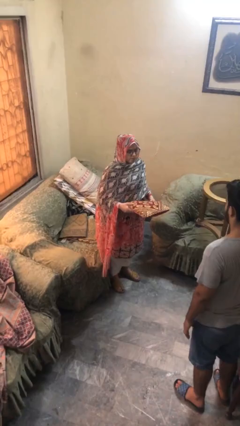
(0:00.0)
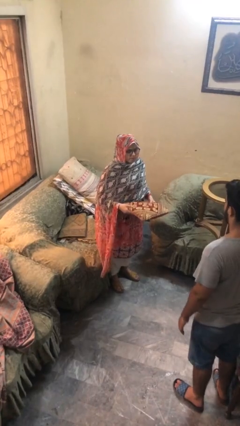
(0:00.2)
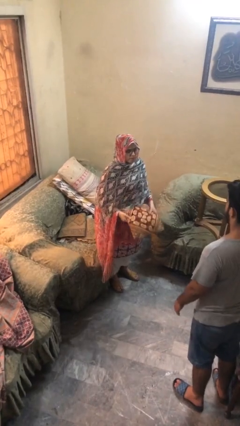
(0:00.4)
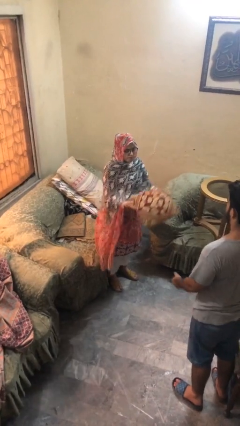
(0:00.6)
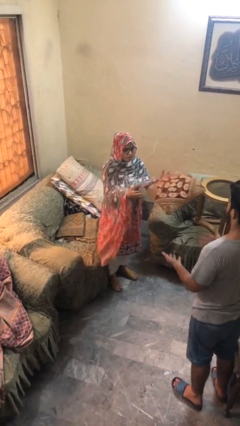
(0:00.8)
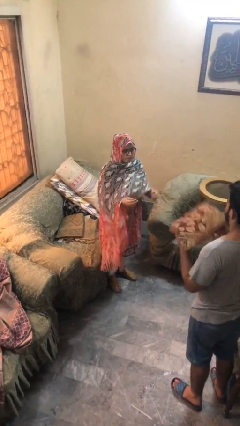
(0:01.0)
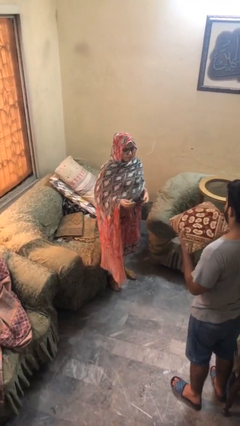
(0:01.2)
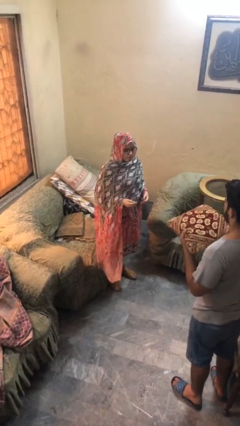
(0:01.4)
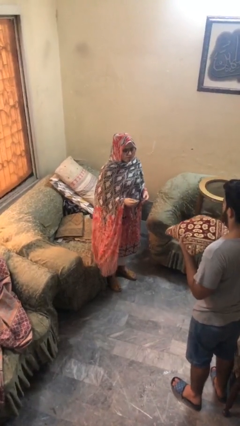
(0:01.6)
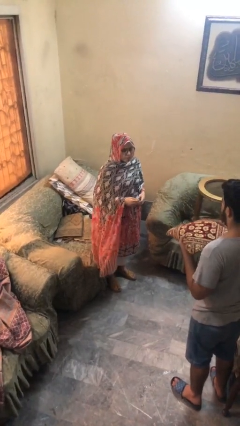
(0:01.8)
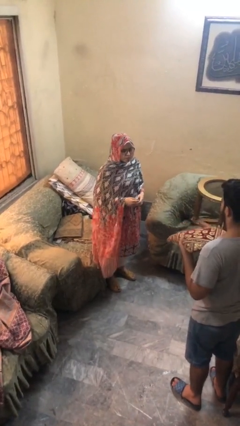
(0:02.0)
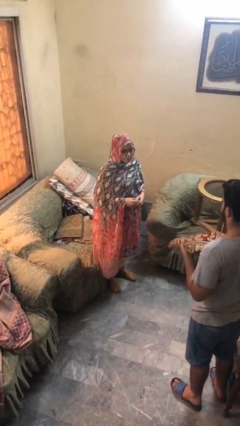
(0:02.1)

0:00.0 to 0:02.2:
person throws object to person

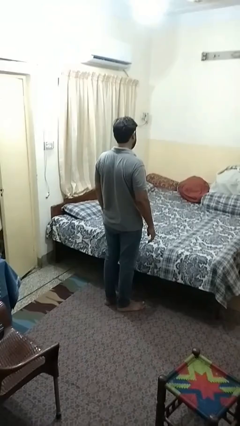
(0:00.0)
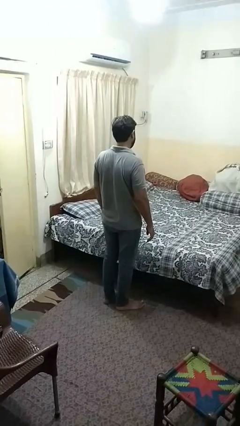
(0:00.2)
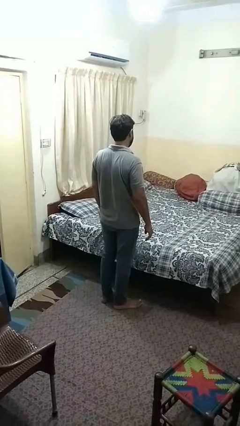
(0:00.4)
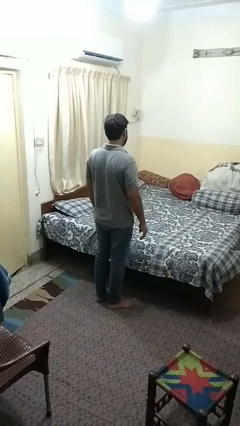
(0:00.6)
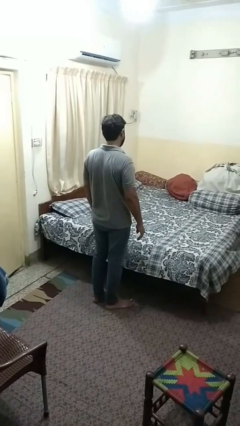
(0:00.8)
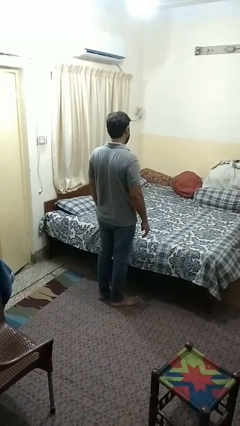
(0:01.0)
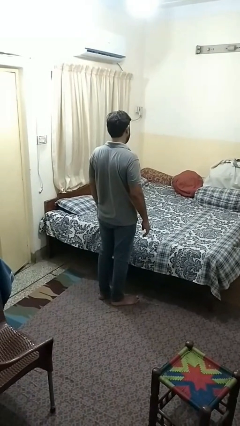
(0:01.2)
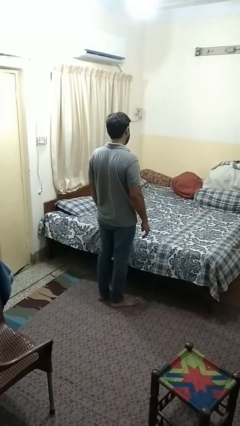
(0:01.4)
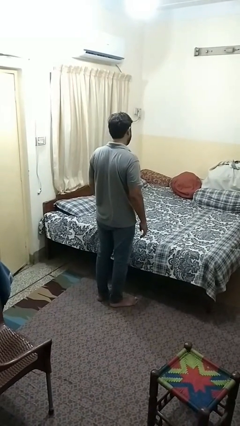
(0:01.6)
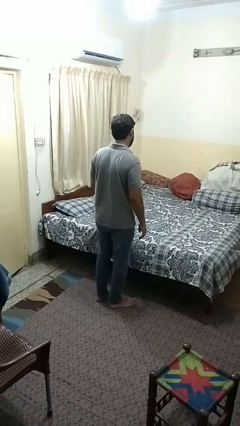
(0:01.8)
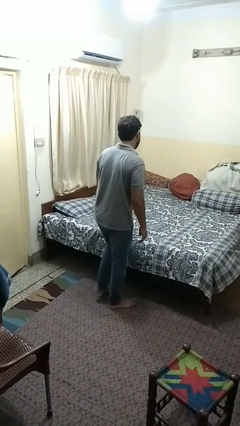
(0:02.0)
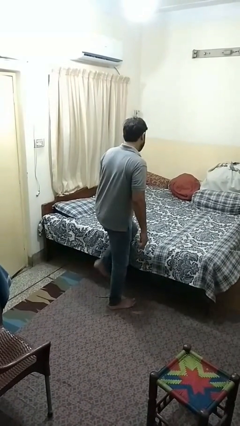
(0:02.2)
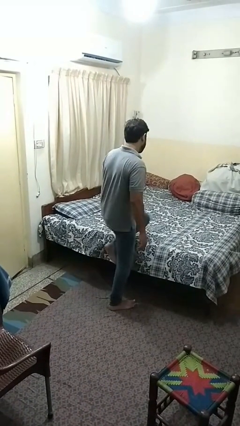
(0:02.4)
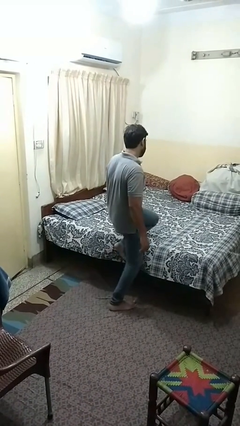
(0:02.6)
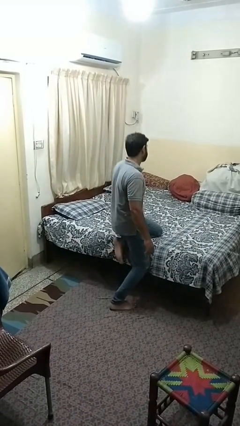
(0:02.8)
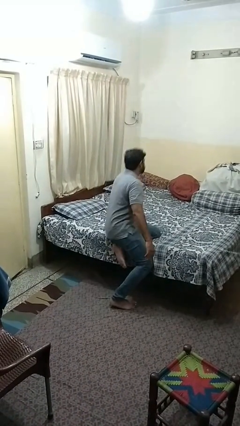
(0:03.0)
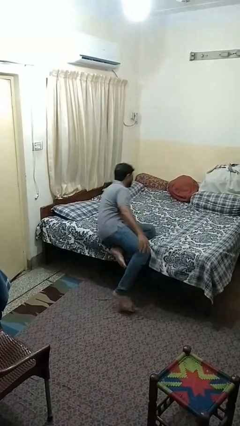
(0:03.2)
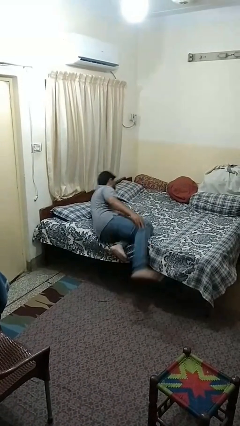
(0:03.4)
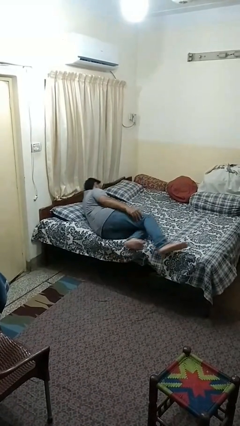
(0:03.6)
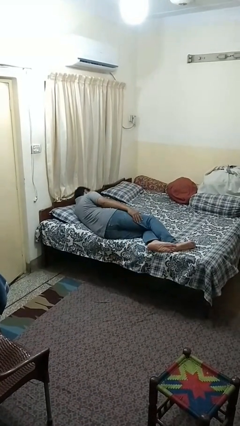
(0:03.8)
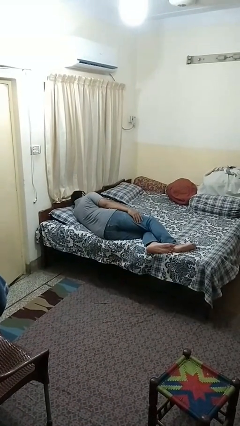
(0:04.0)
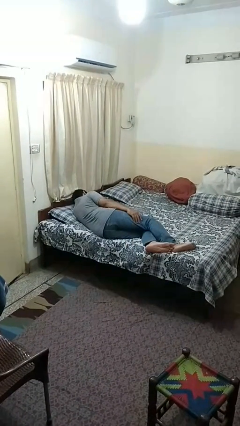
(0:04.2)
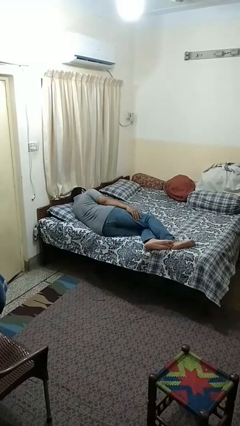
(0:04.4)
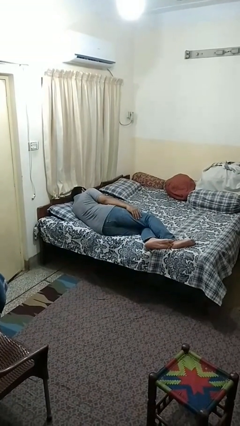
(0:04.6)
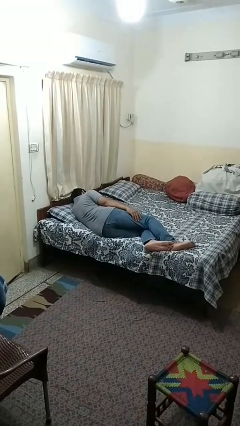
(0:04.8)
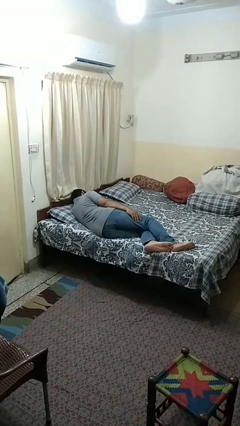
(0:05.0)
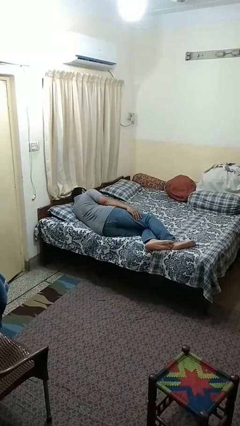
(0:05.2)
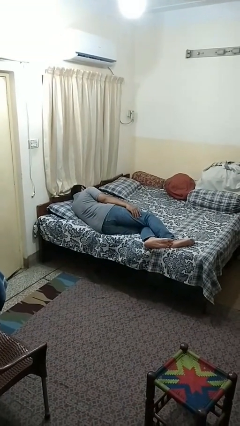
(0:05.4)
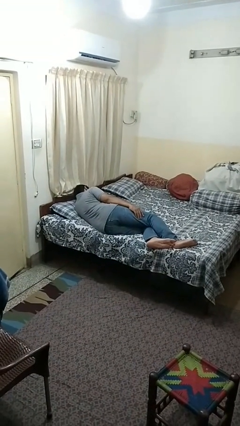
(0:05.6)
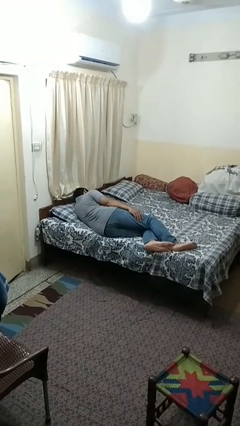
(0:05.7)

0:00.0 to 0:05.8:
person lies down on bed

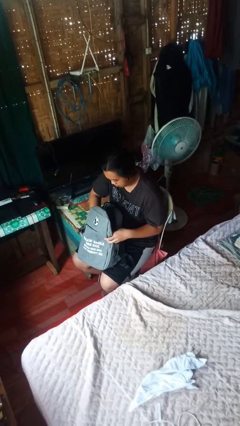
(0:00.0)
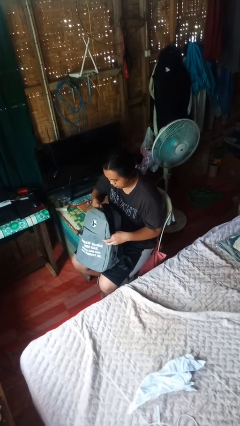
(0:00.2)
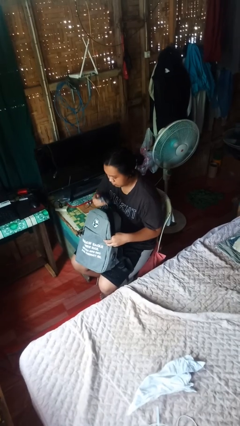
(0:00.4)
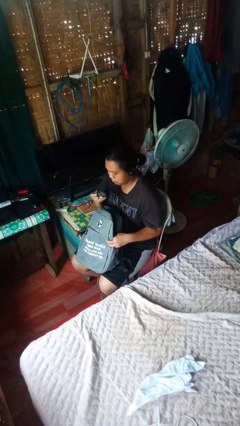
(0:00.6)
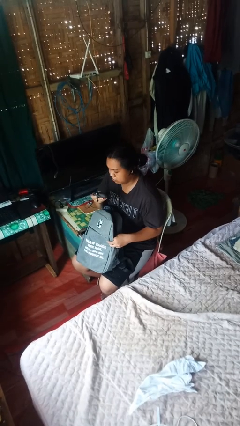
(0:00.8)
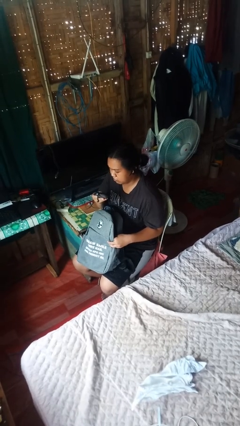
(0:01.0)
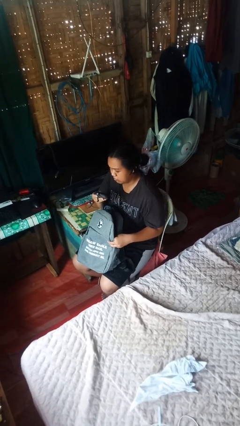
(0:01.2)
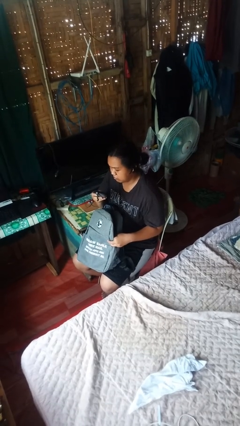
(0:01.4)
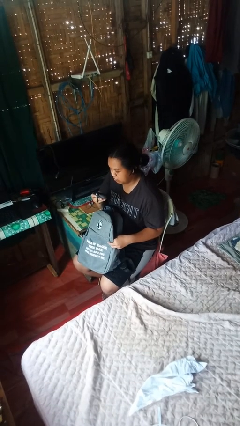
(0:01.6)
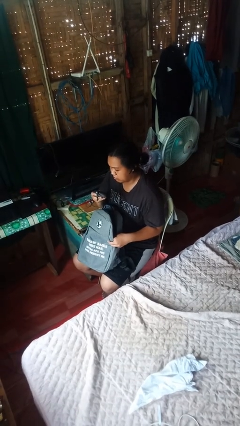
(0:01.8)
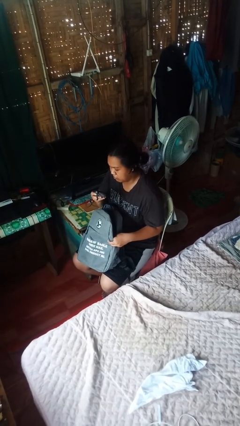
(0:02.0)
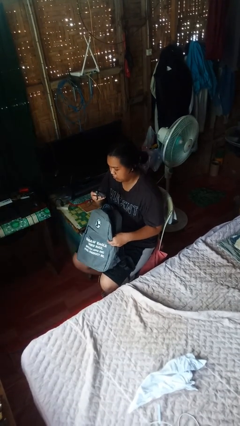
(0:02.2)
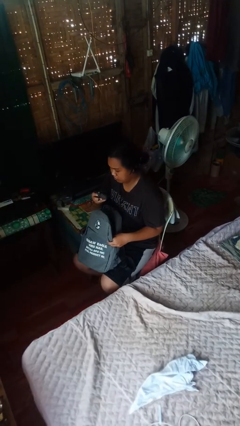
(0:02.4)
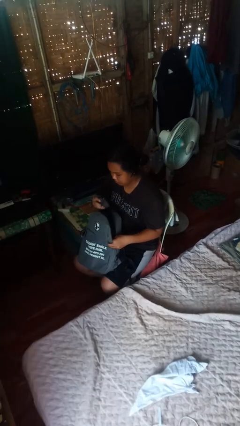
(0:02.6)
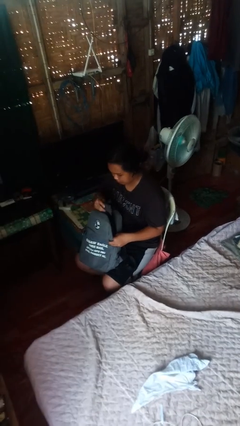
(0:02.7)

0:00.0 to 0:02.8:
person takes object from backpack

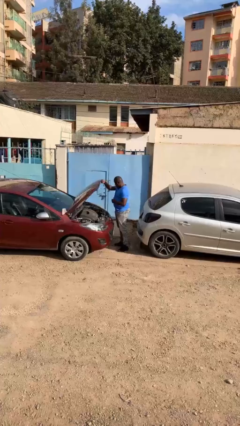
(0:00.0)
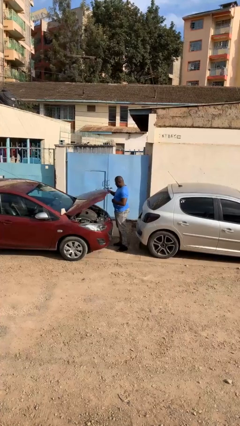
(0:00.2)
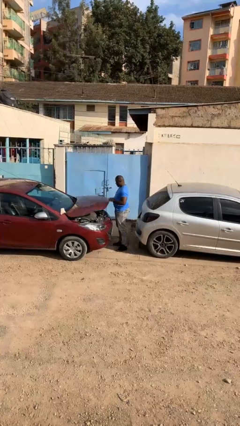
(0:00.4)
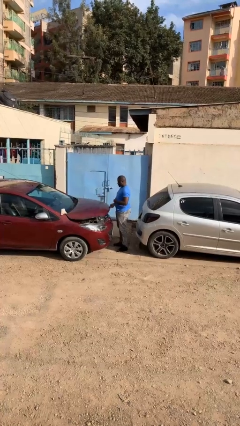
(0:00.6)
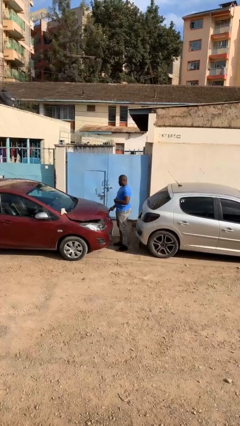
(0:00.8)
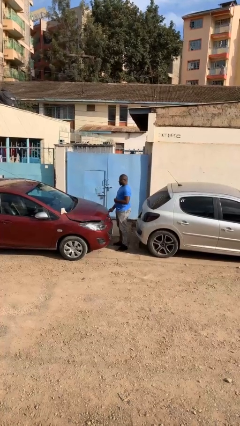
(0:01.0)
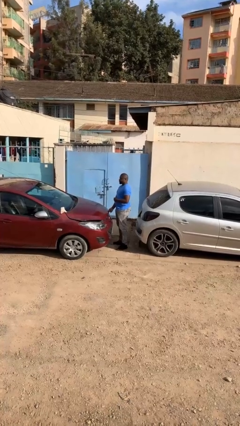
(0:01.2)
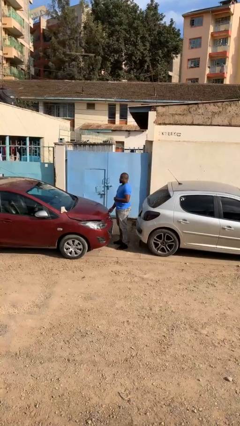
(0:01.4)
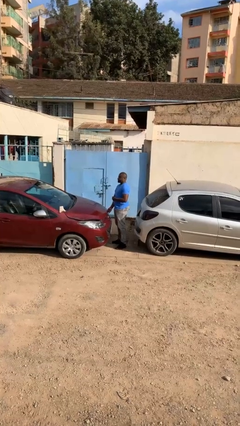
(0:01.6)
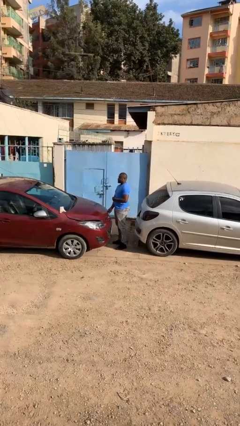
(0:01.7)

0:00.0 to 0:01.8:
person closes car hood

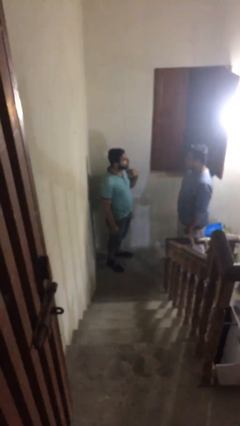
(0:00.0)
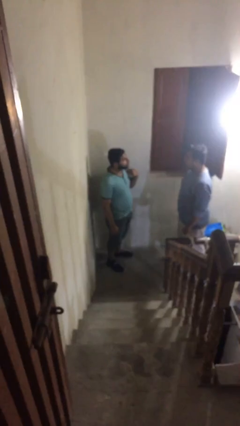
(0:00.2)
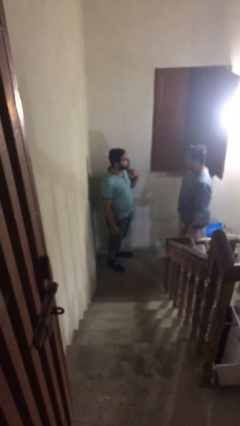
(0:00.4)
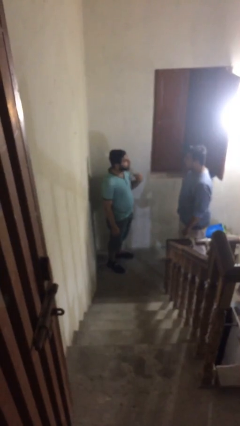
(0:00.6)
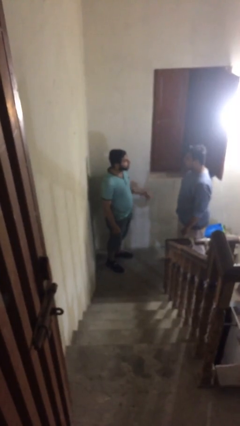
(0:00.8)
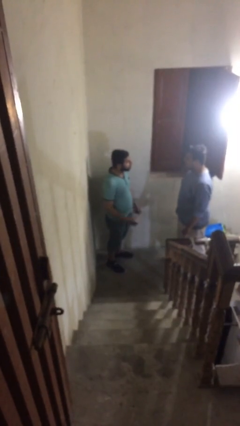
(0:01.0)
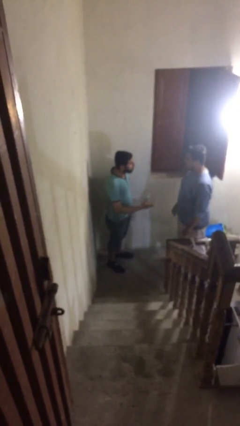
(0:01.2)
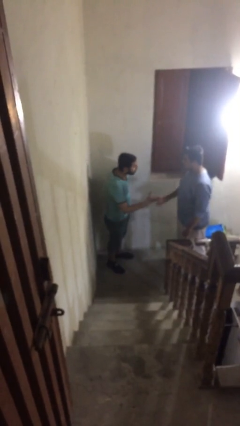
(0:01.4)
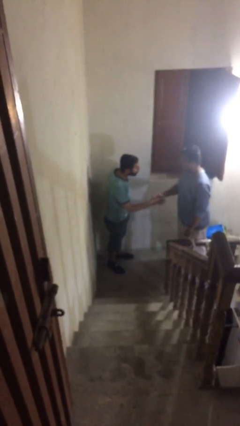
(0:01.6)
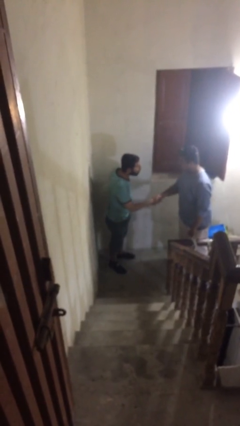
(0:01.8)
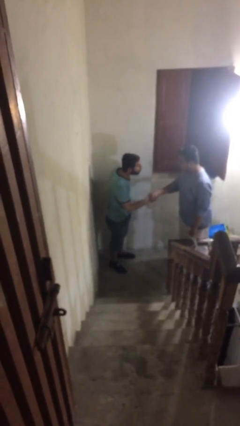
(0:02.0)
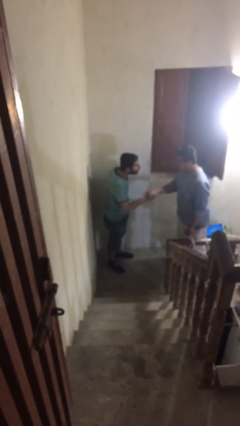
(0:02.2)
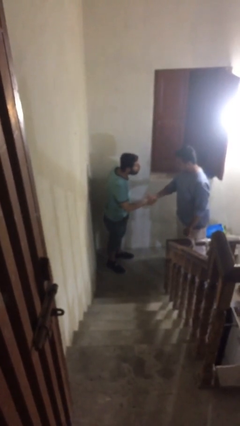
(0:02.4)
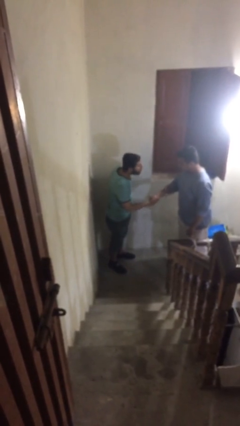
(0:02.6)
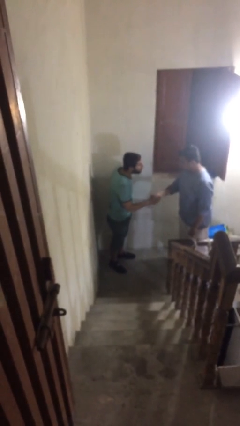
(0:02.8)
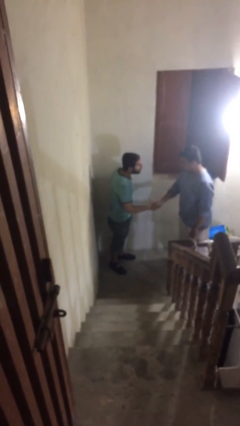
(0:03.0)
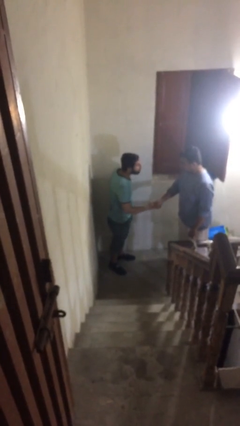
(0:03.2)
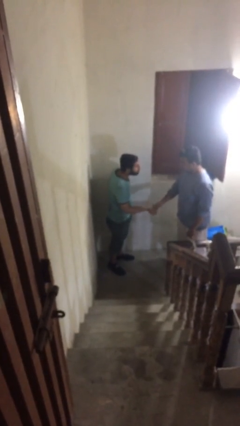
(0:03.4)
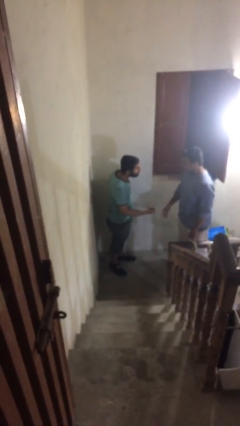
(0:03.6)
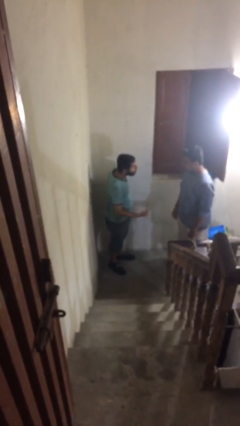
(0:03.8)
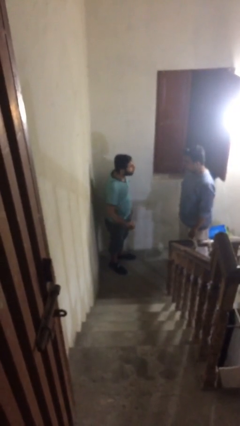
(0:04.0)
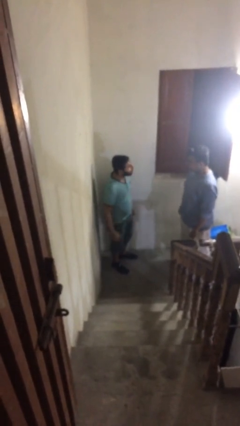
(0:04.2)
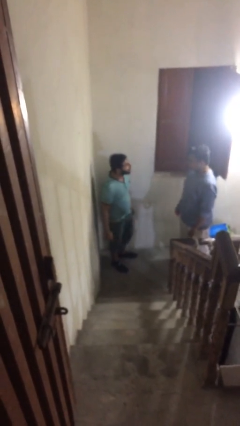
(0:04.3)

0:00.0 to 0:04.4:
person shakes hand
